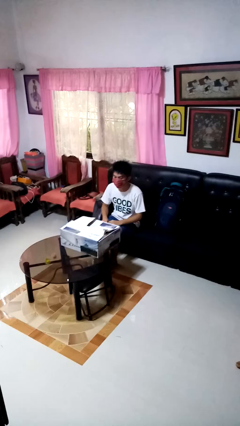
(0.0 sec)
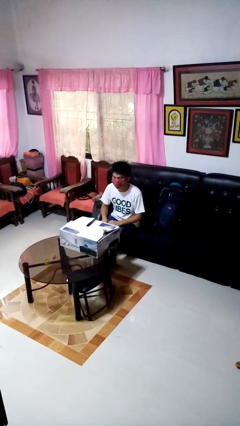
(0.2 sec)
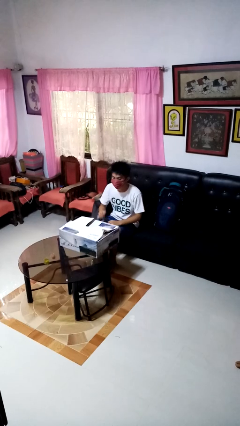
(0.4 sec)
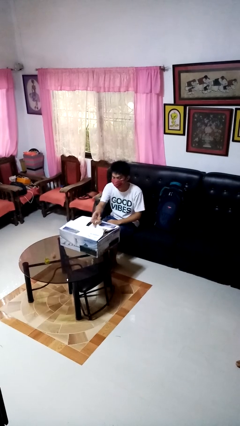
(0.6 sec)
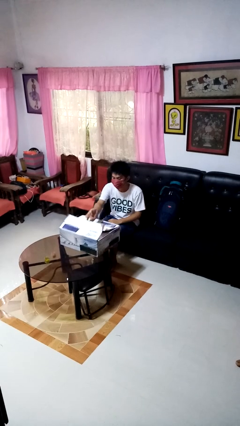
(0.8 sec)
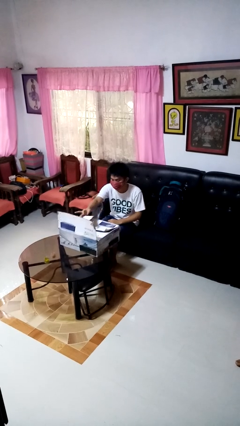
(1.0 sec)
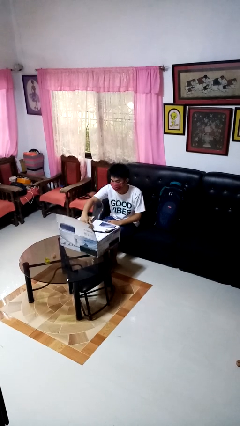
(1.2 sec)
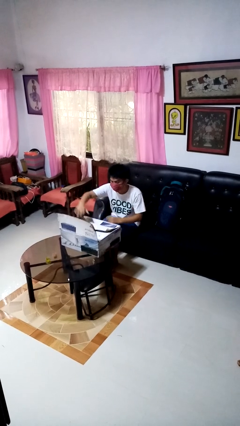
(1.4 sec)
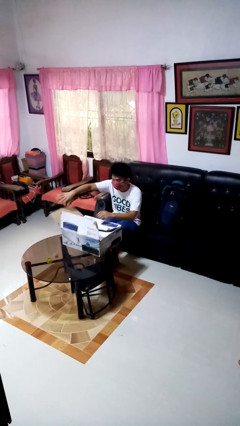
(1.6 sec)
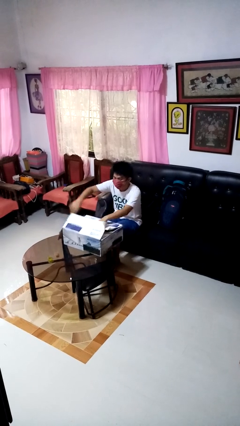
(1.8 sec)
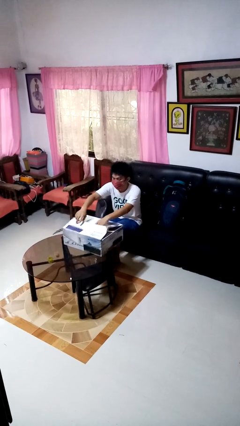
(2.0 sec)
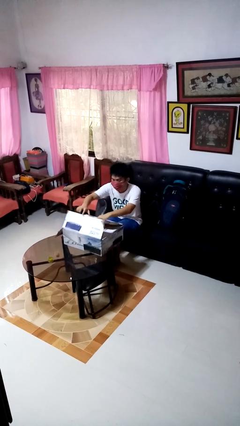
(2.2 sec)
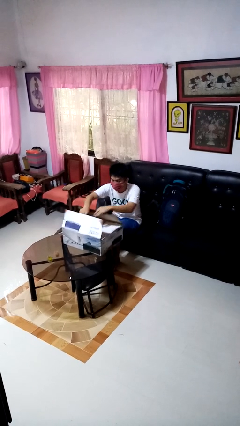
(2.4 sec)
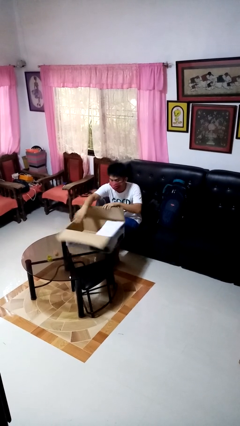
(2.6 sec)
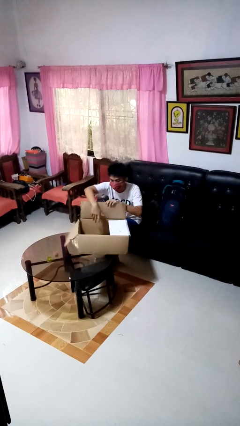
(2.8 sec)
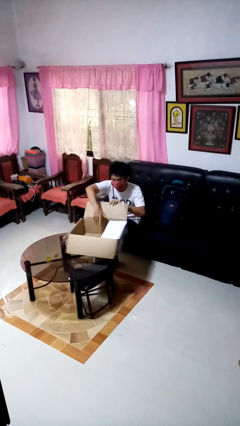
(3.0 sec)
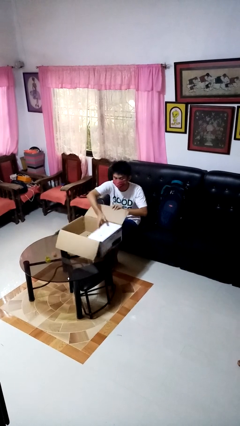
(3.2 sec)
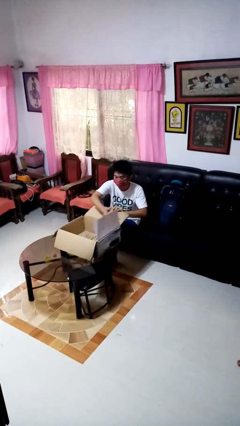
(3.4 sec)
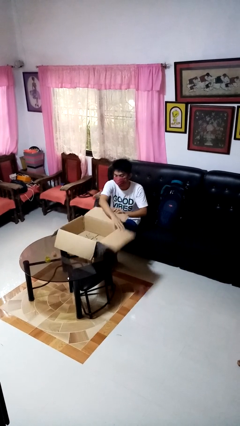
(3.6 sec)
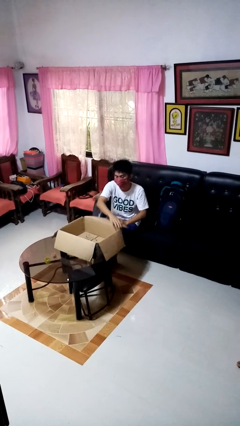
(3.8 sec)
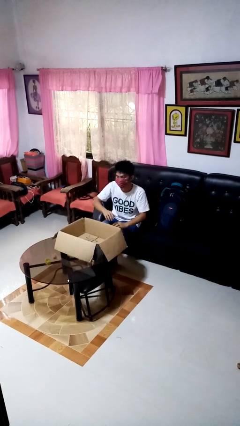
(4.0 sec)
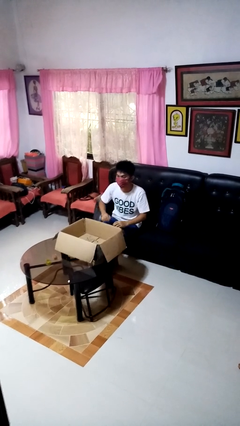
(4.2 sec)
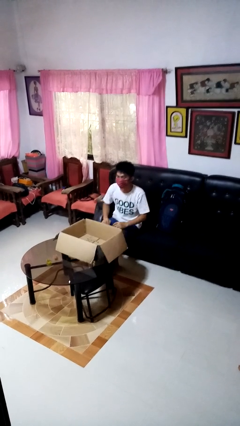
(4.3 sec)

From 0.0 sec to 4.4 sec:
person opens box

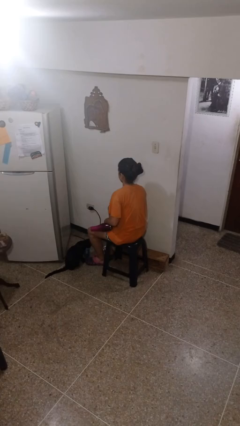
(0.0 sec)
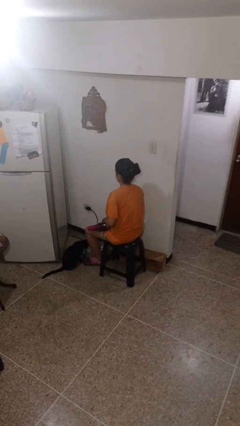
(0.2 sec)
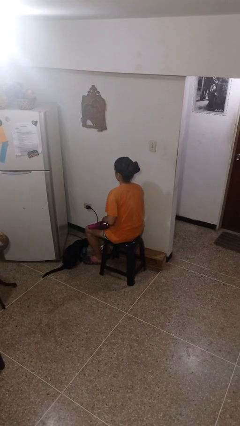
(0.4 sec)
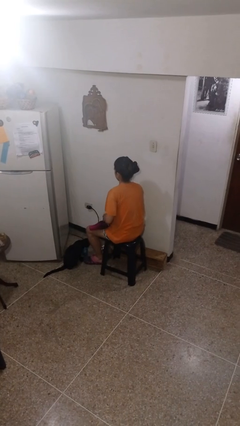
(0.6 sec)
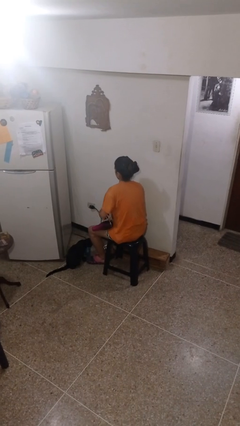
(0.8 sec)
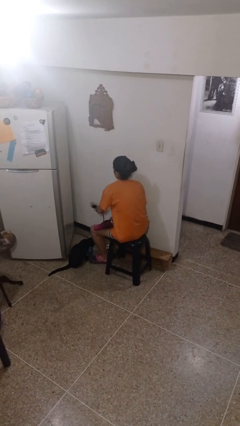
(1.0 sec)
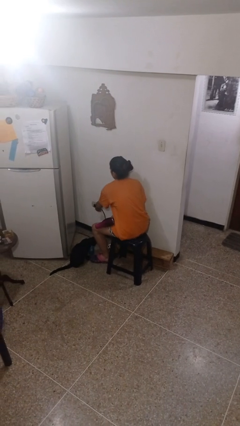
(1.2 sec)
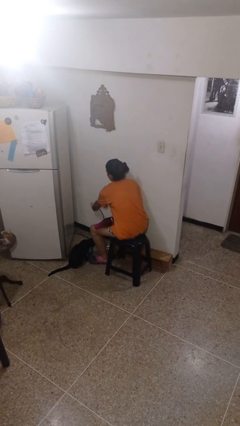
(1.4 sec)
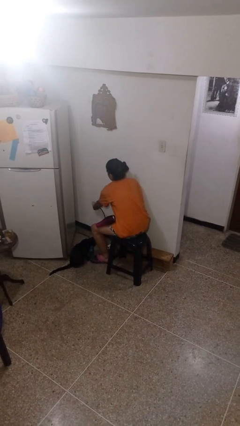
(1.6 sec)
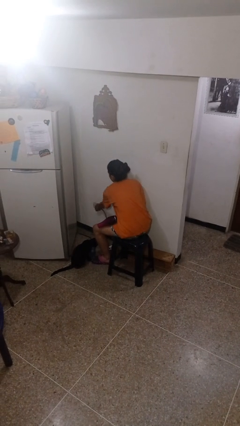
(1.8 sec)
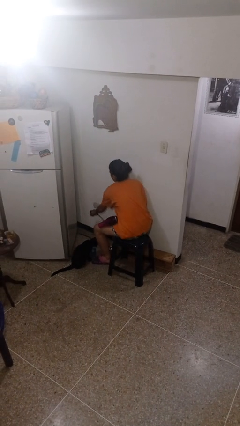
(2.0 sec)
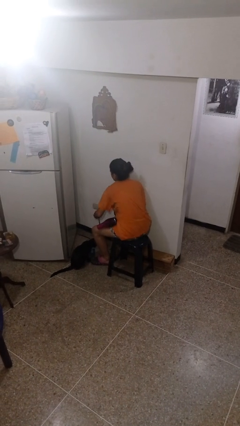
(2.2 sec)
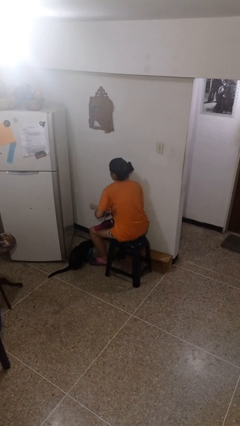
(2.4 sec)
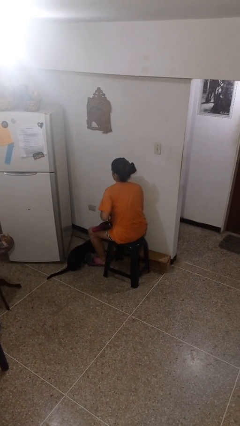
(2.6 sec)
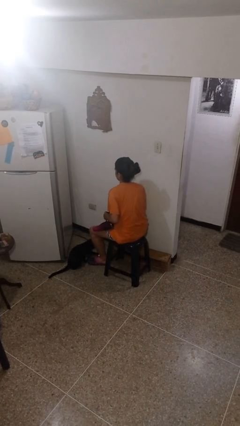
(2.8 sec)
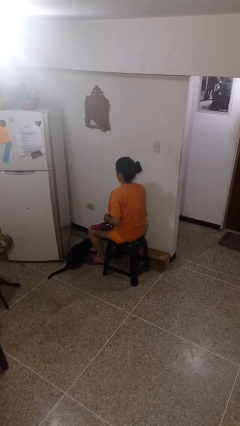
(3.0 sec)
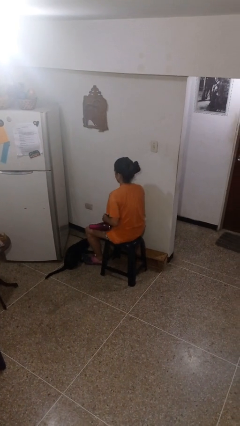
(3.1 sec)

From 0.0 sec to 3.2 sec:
person unplugs from electrical socket

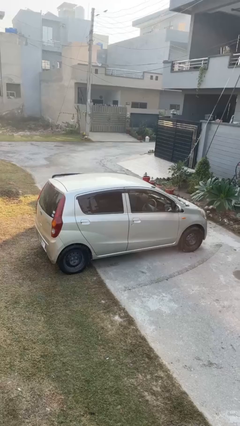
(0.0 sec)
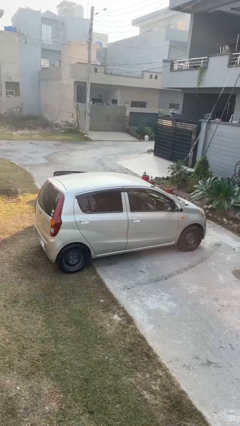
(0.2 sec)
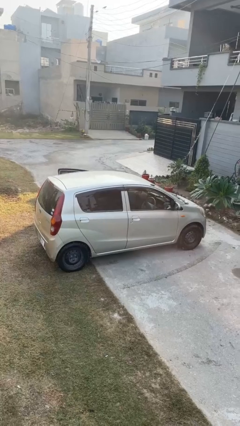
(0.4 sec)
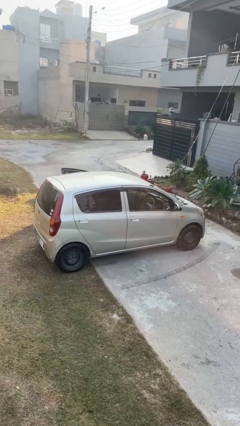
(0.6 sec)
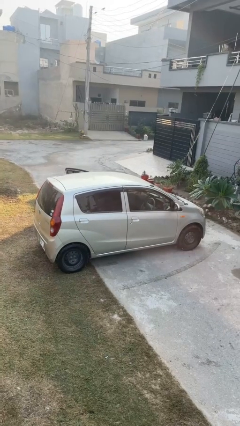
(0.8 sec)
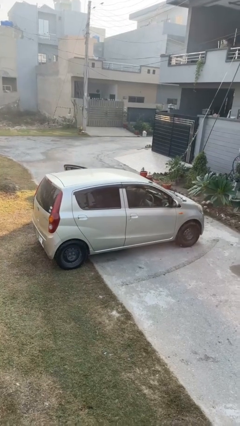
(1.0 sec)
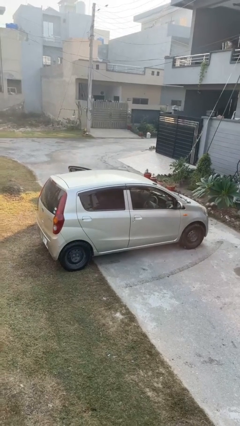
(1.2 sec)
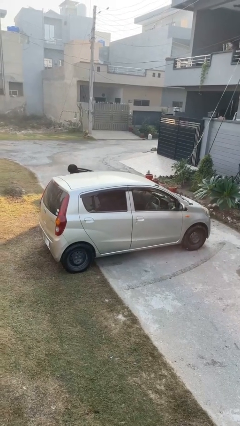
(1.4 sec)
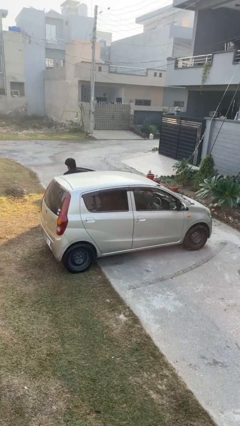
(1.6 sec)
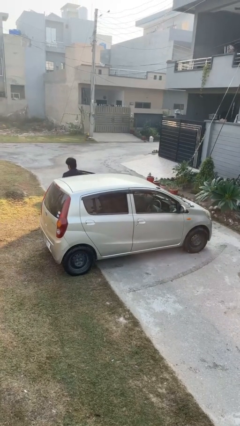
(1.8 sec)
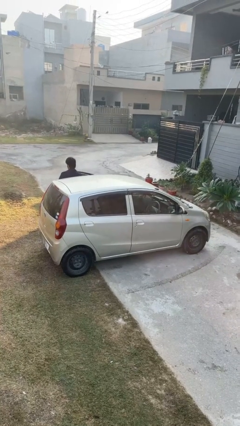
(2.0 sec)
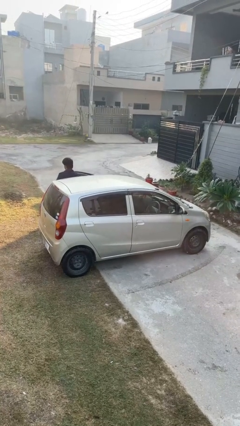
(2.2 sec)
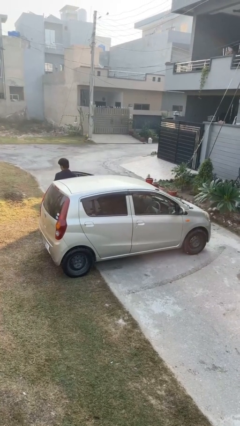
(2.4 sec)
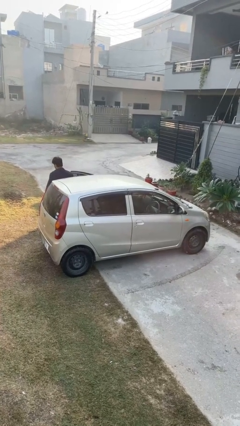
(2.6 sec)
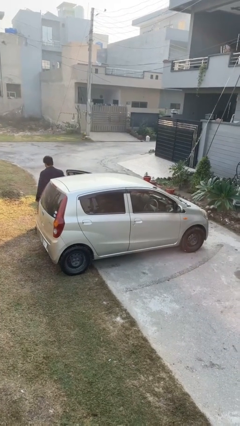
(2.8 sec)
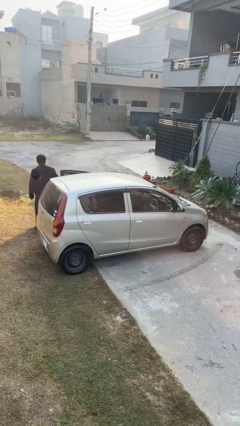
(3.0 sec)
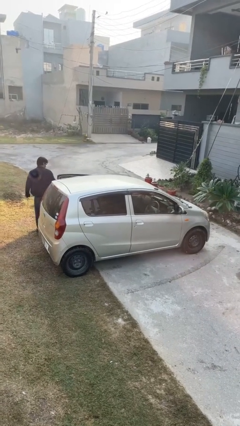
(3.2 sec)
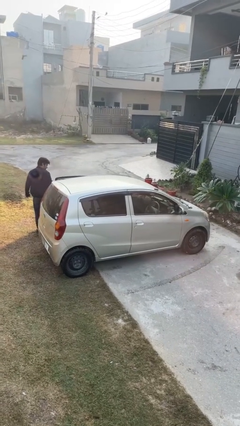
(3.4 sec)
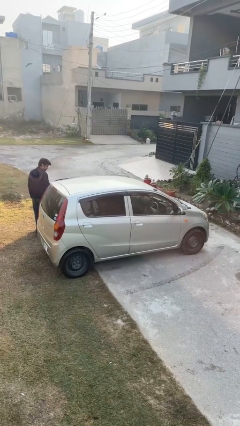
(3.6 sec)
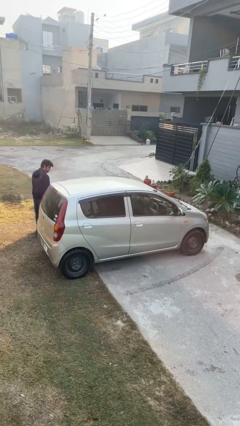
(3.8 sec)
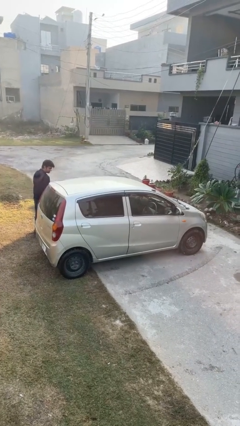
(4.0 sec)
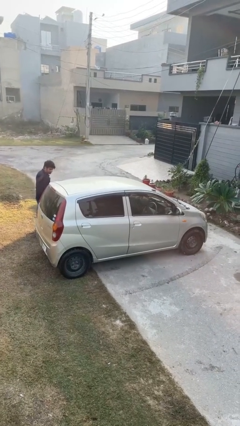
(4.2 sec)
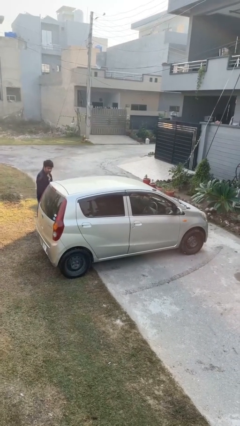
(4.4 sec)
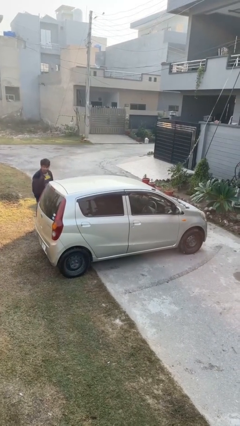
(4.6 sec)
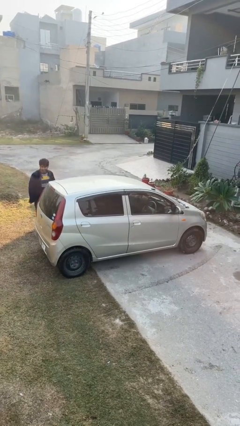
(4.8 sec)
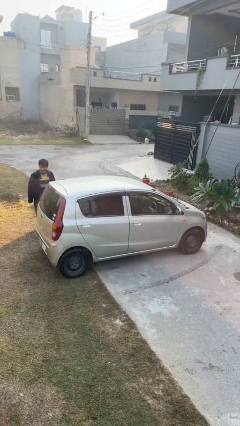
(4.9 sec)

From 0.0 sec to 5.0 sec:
car drops off person

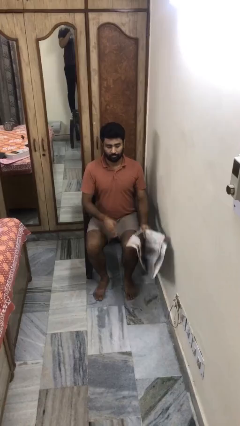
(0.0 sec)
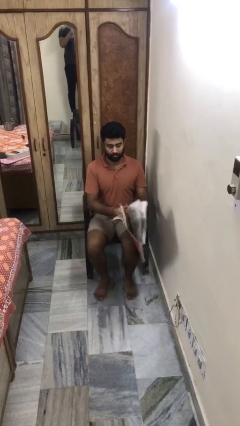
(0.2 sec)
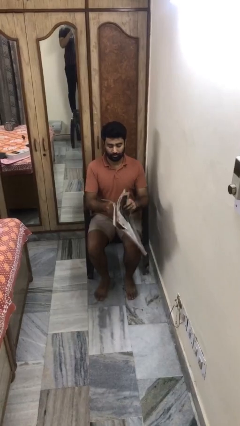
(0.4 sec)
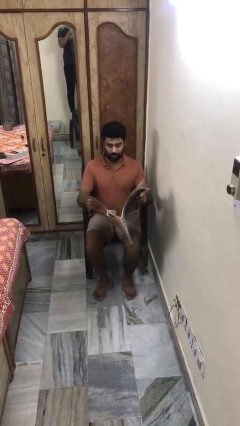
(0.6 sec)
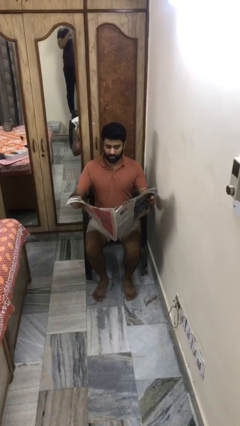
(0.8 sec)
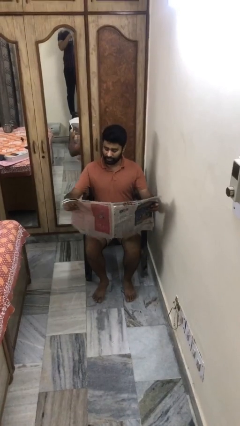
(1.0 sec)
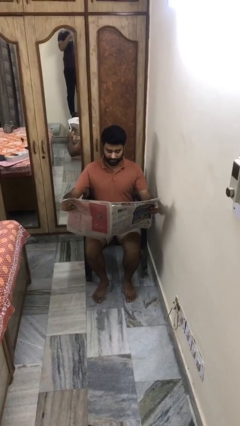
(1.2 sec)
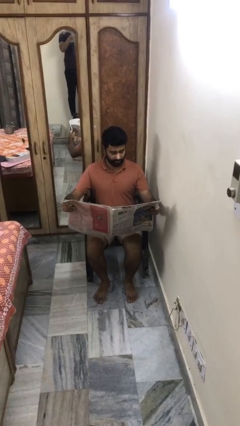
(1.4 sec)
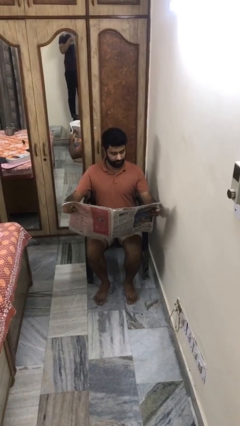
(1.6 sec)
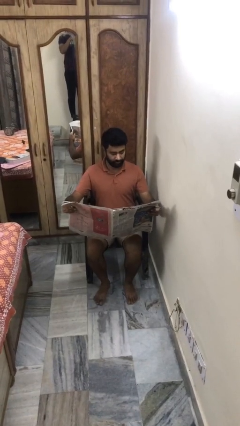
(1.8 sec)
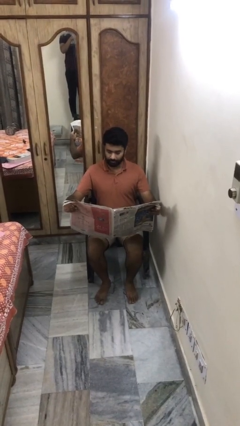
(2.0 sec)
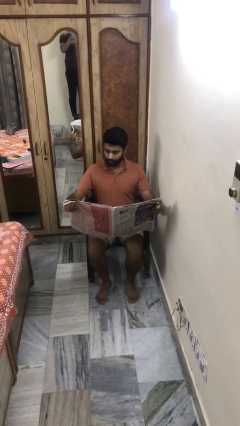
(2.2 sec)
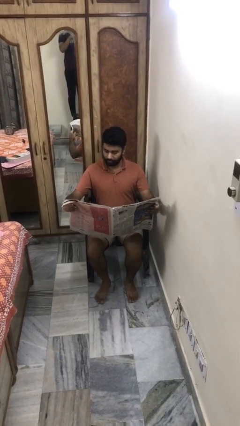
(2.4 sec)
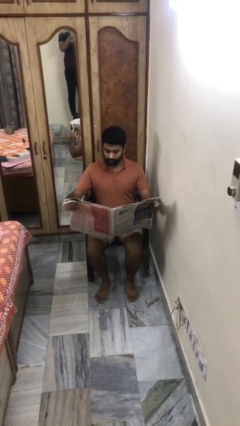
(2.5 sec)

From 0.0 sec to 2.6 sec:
person reads newspaper

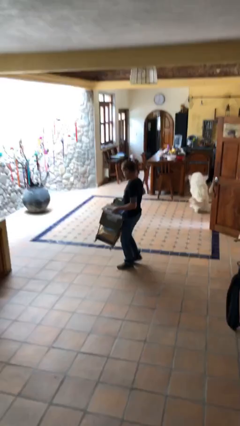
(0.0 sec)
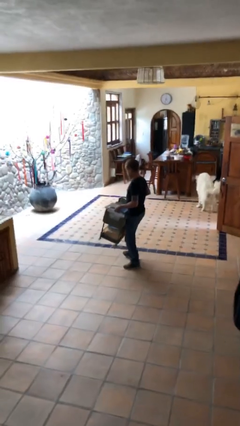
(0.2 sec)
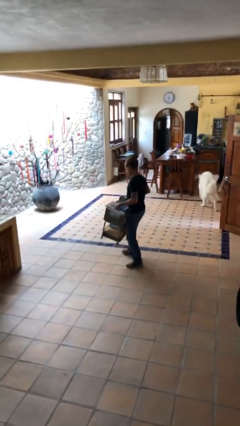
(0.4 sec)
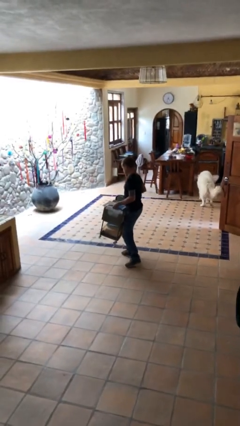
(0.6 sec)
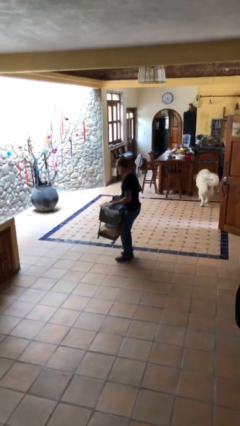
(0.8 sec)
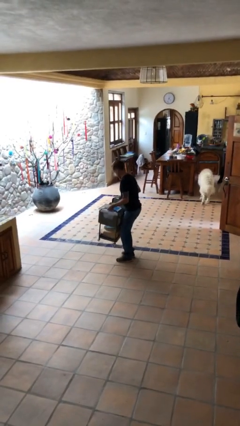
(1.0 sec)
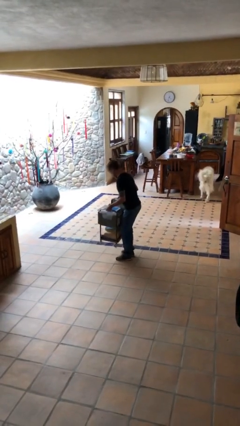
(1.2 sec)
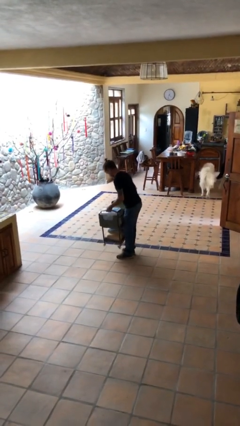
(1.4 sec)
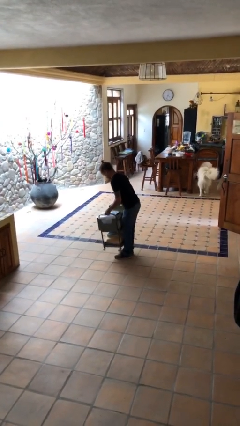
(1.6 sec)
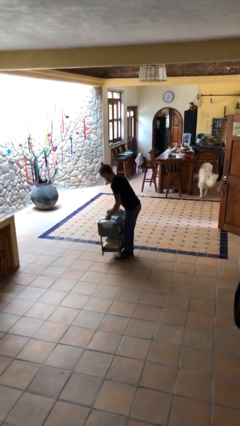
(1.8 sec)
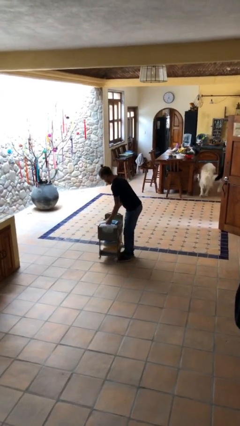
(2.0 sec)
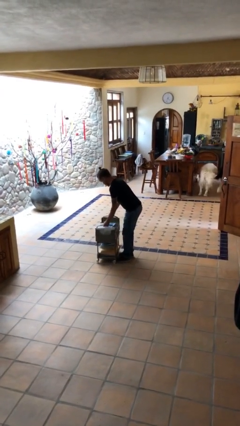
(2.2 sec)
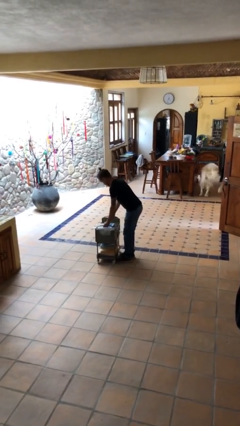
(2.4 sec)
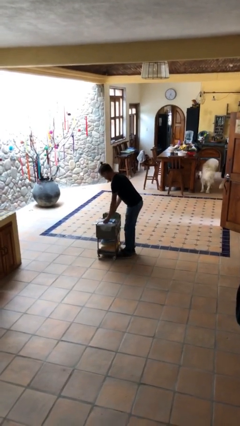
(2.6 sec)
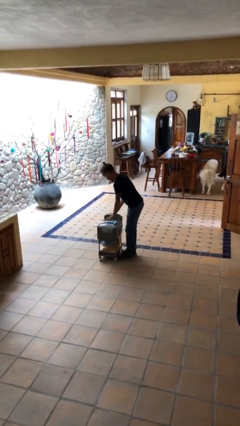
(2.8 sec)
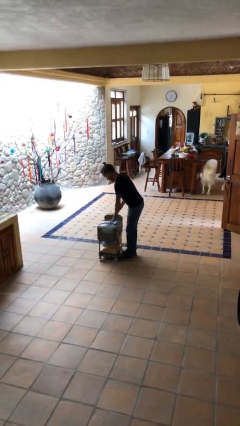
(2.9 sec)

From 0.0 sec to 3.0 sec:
person puts down object on floor
